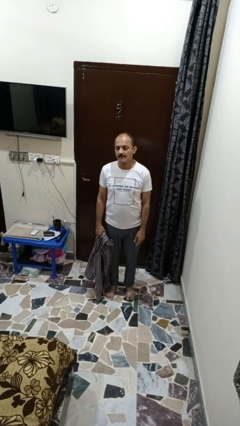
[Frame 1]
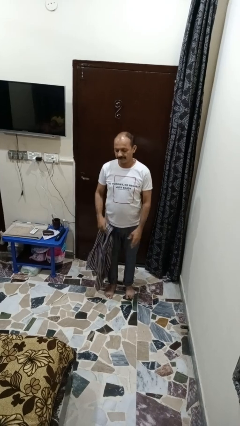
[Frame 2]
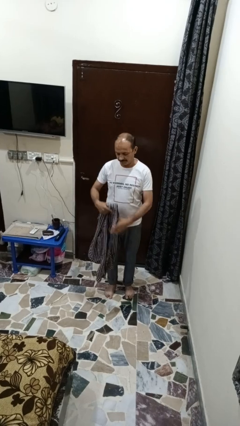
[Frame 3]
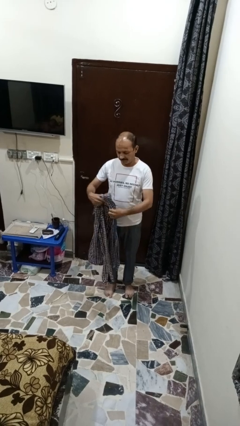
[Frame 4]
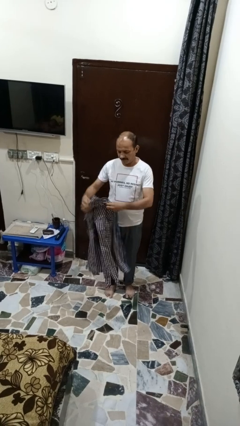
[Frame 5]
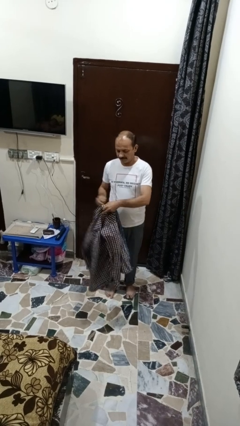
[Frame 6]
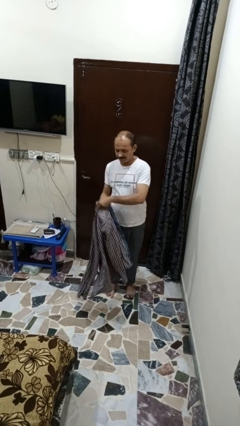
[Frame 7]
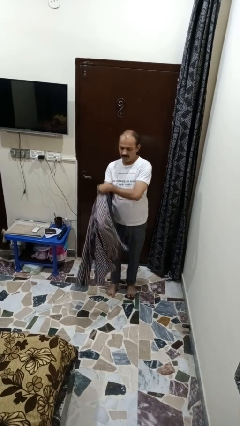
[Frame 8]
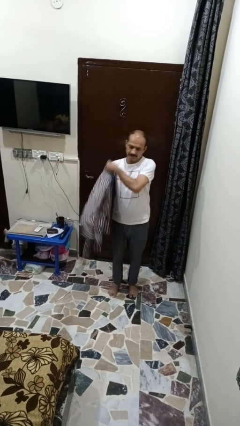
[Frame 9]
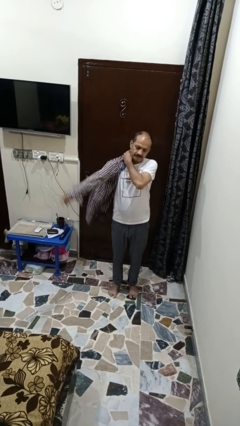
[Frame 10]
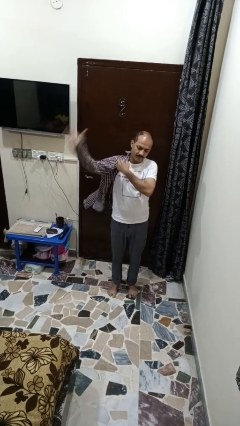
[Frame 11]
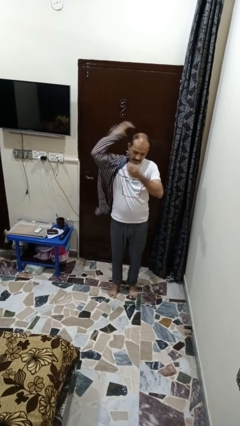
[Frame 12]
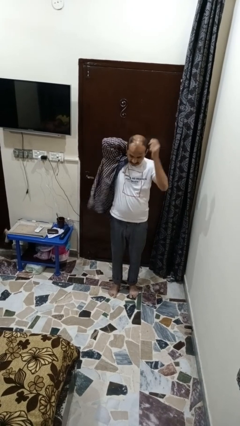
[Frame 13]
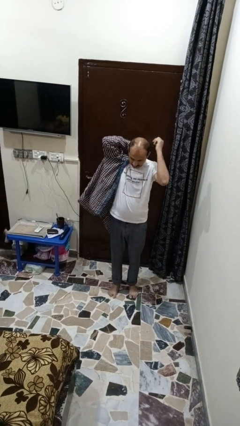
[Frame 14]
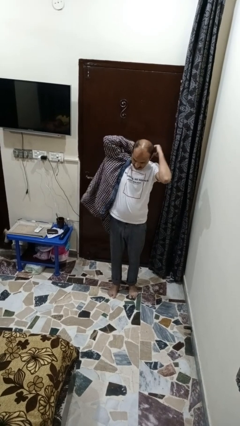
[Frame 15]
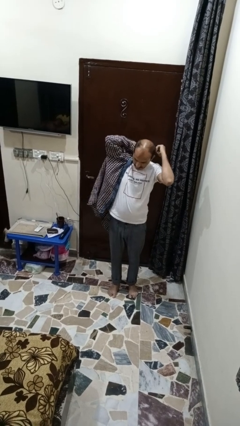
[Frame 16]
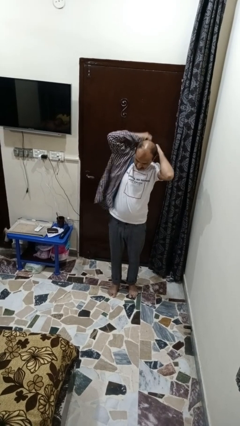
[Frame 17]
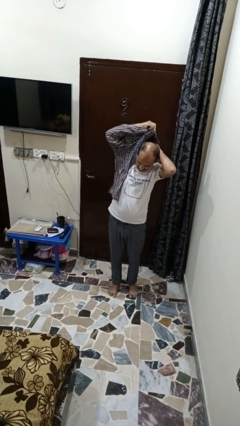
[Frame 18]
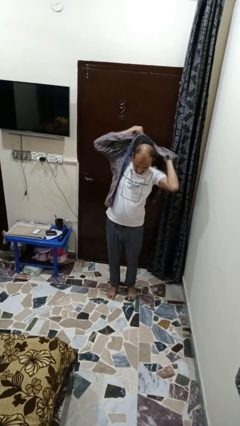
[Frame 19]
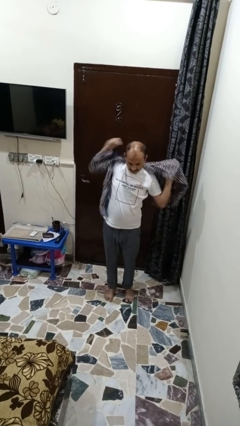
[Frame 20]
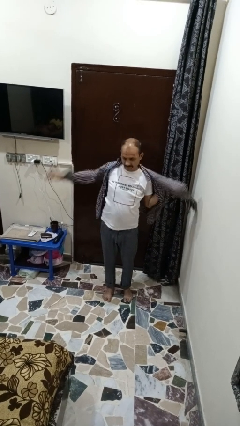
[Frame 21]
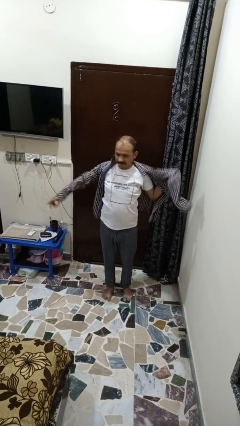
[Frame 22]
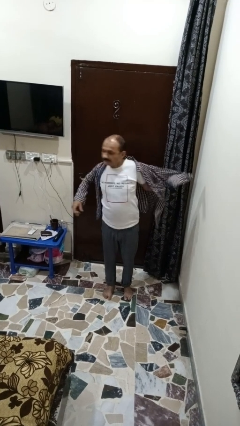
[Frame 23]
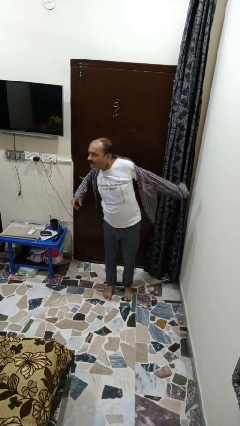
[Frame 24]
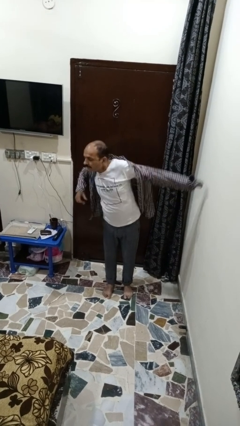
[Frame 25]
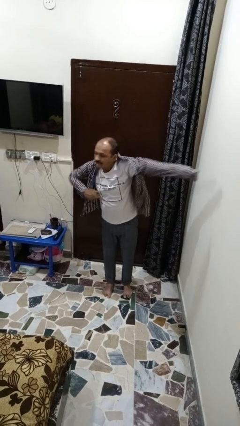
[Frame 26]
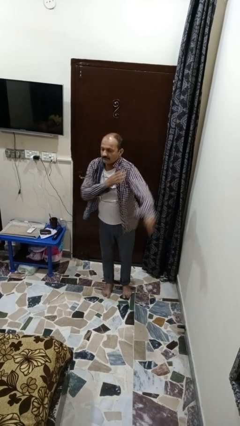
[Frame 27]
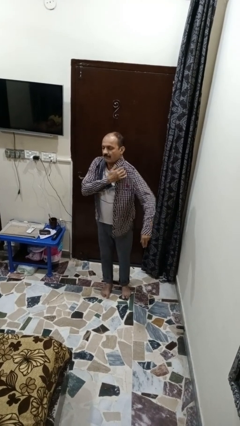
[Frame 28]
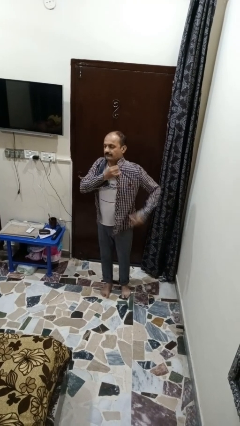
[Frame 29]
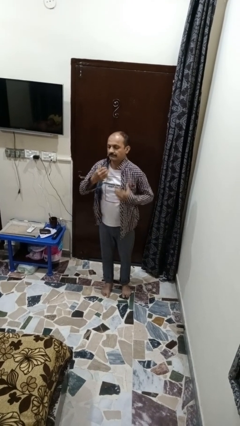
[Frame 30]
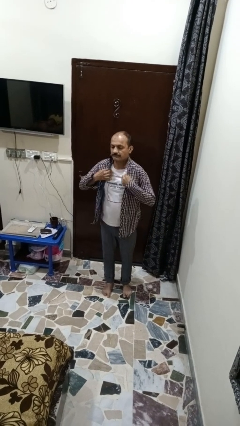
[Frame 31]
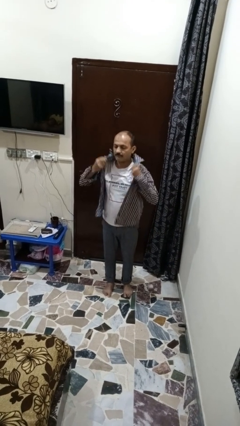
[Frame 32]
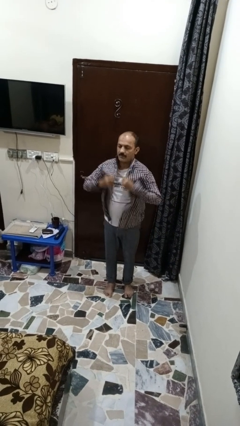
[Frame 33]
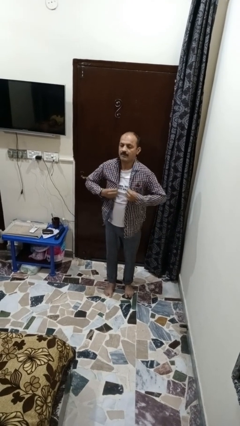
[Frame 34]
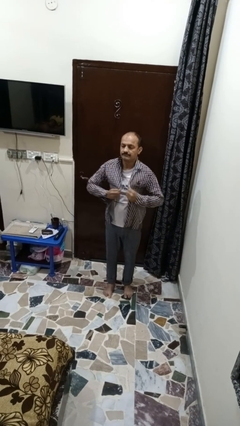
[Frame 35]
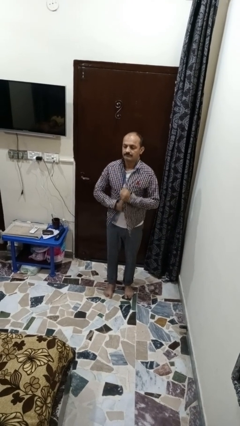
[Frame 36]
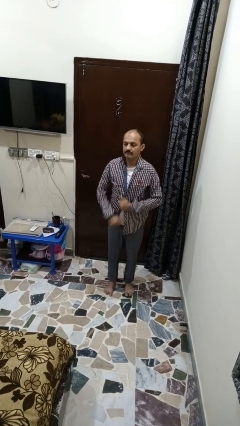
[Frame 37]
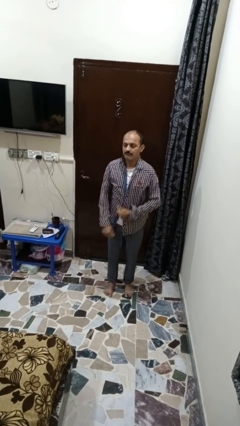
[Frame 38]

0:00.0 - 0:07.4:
person puts on shirt

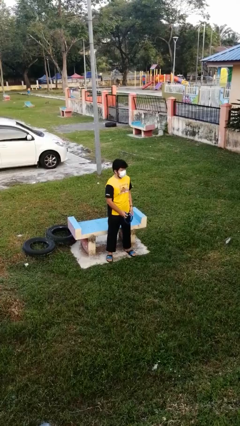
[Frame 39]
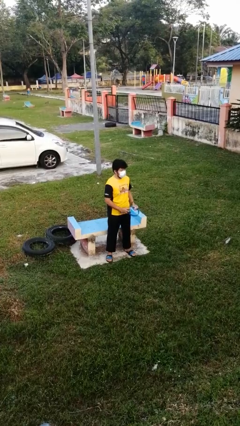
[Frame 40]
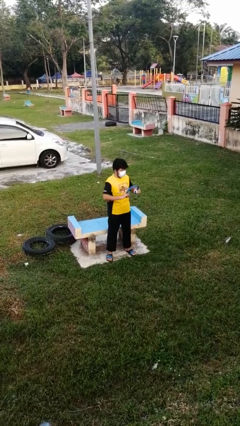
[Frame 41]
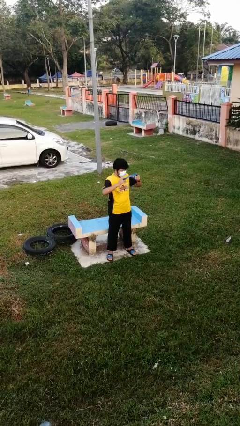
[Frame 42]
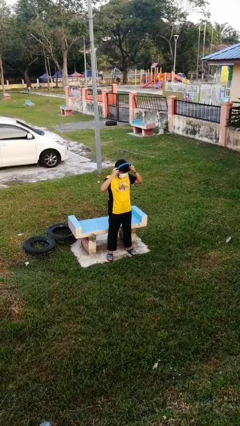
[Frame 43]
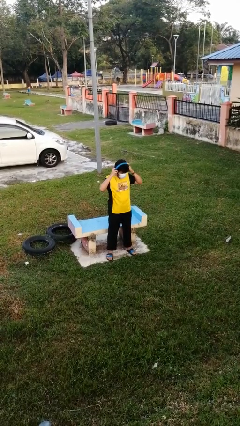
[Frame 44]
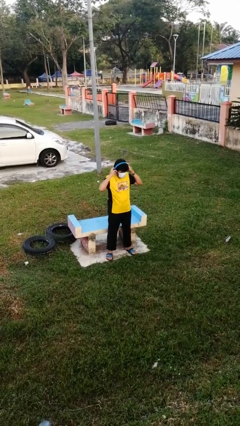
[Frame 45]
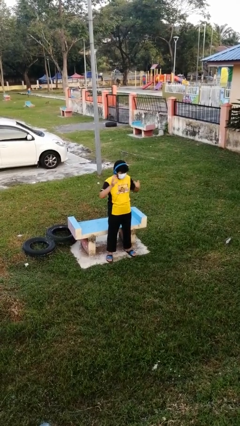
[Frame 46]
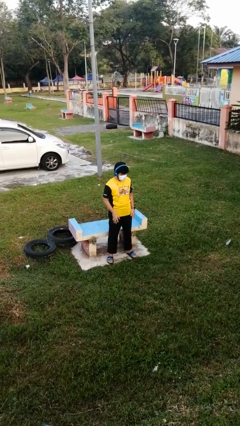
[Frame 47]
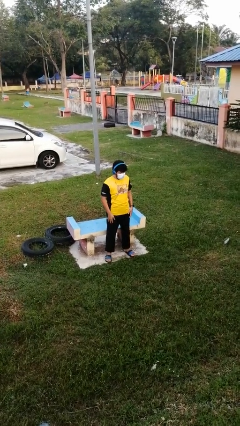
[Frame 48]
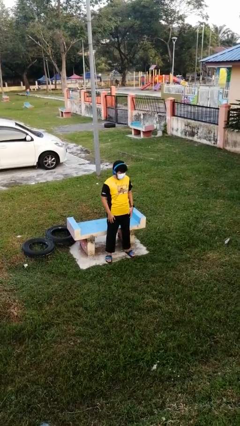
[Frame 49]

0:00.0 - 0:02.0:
person puts on headphones

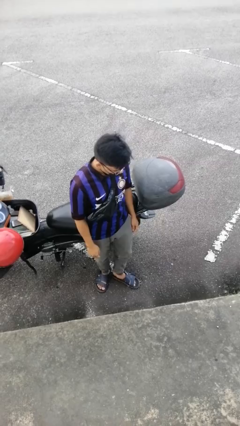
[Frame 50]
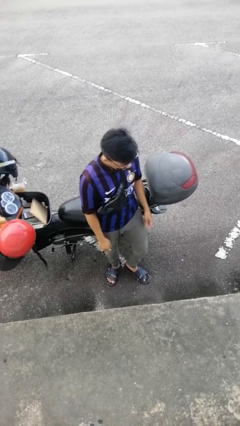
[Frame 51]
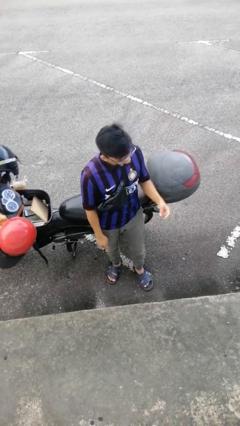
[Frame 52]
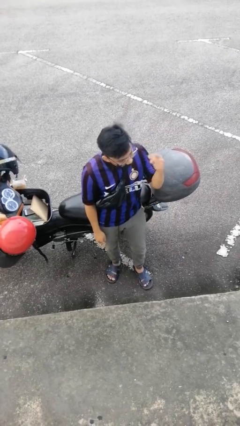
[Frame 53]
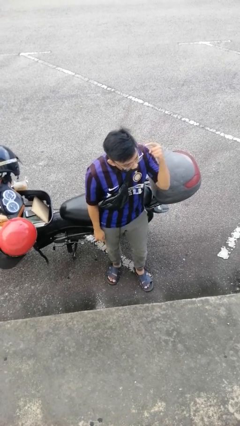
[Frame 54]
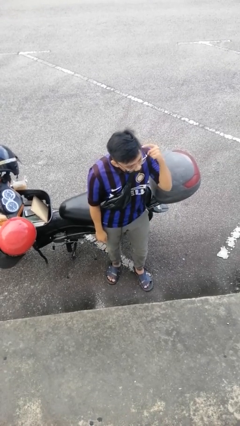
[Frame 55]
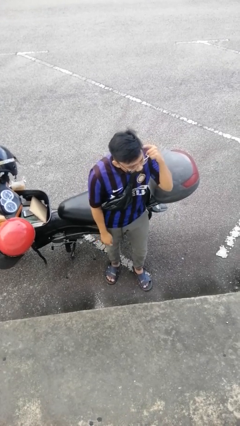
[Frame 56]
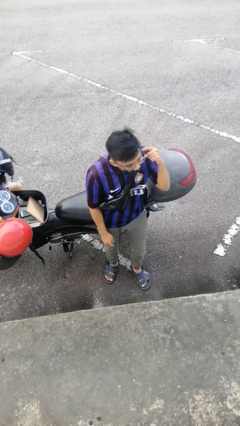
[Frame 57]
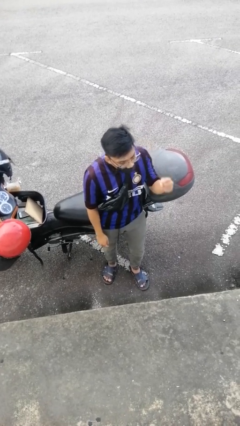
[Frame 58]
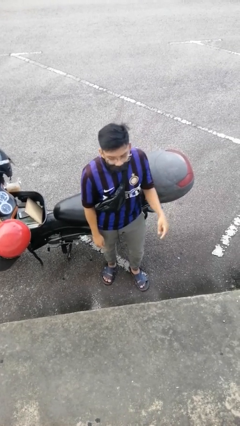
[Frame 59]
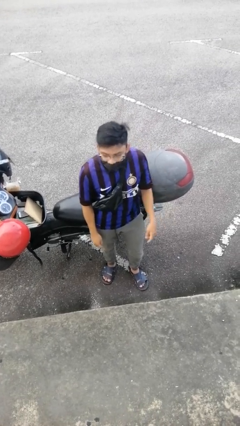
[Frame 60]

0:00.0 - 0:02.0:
person gestures listen closely

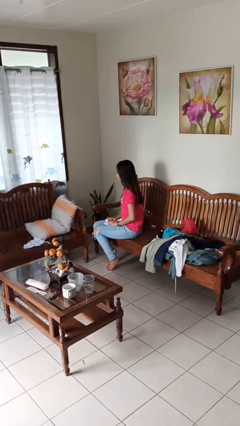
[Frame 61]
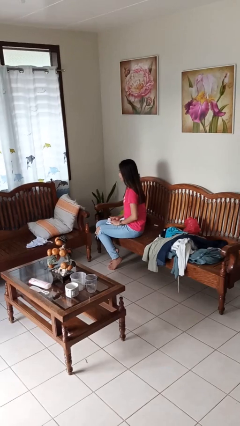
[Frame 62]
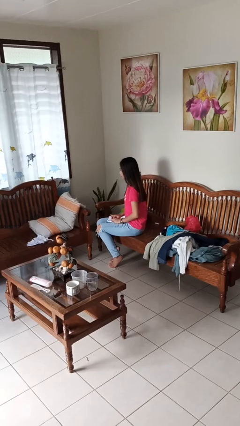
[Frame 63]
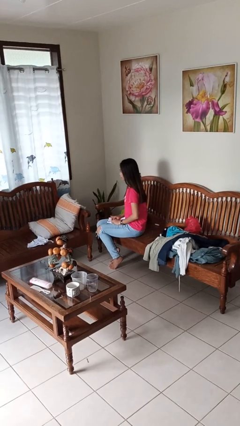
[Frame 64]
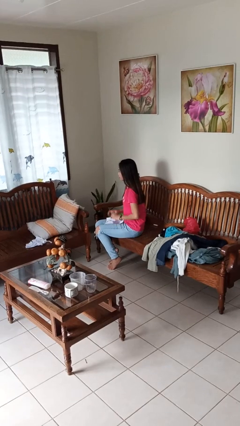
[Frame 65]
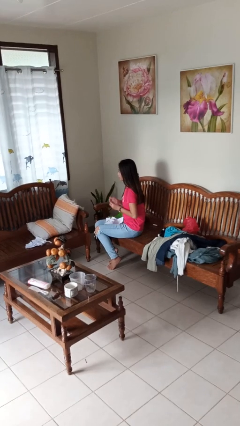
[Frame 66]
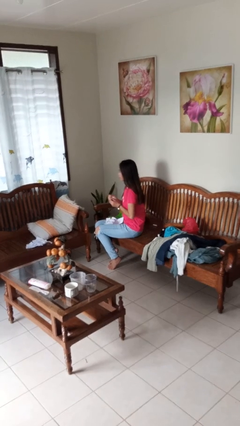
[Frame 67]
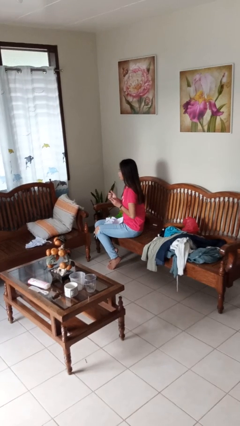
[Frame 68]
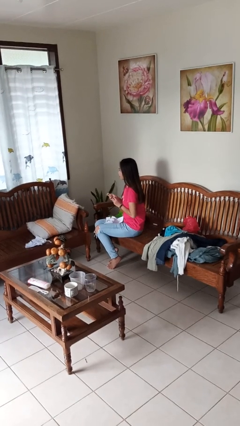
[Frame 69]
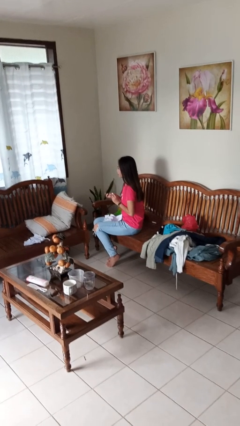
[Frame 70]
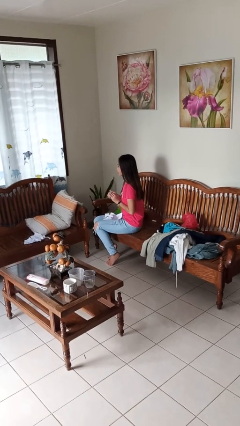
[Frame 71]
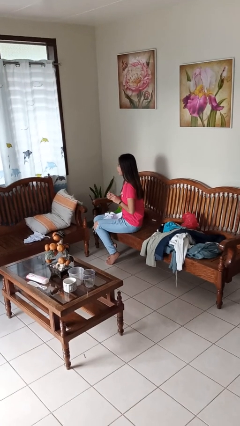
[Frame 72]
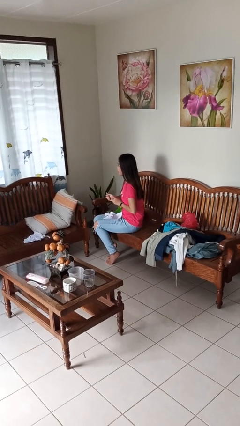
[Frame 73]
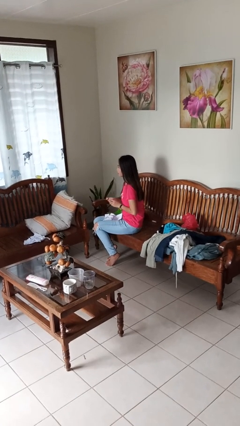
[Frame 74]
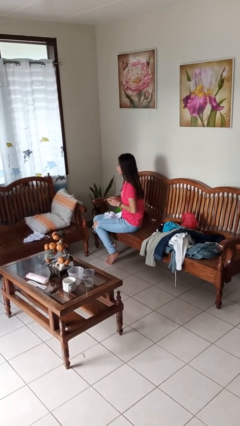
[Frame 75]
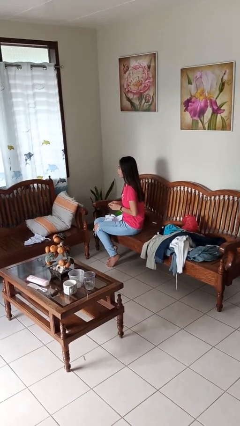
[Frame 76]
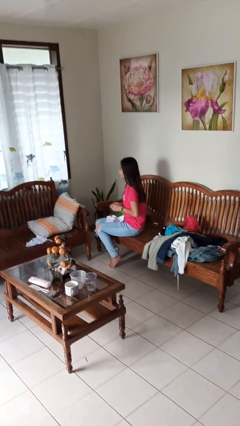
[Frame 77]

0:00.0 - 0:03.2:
person crumples paper

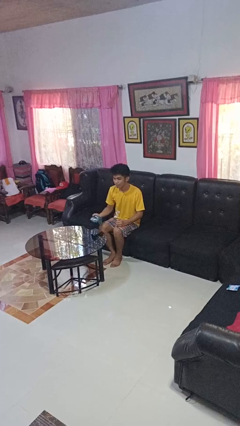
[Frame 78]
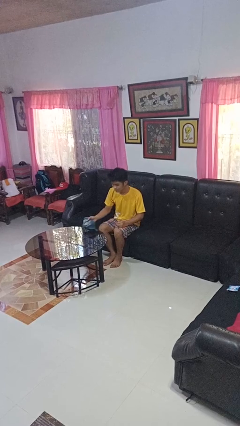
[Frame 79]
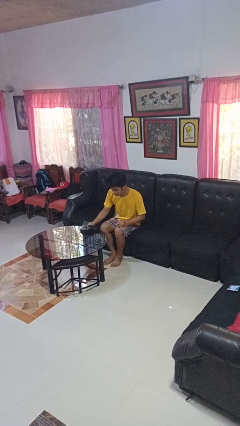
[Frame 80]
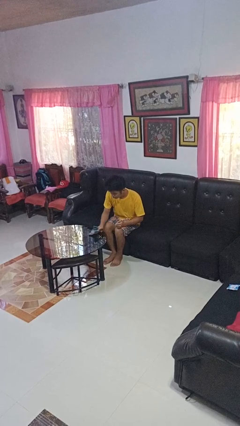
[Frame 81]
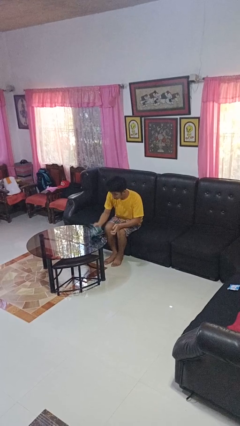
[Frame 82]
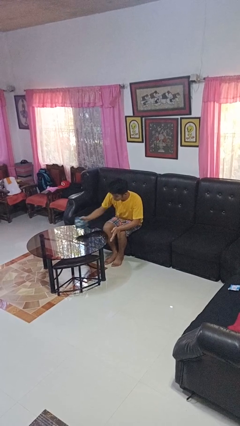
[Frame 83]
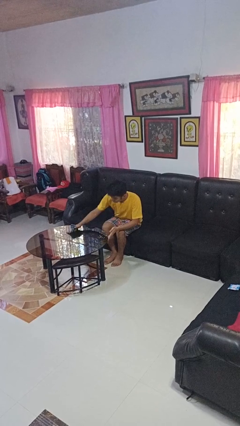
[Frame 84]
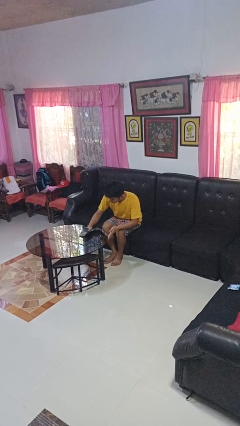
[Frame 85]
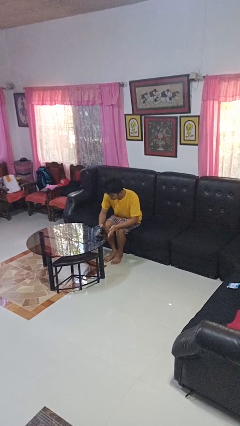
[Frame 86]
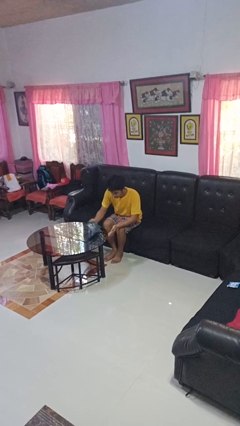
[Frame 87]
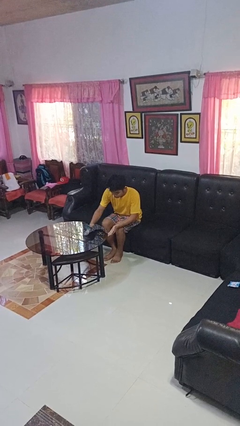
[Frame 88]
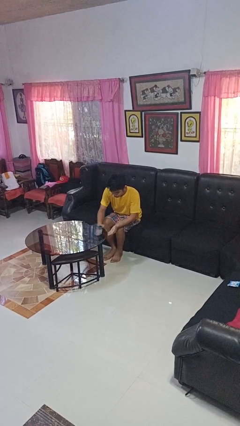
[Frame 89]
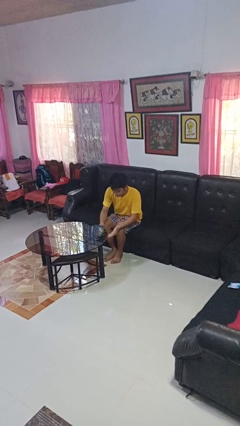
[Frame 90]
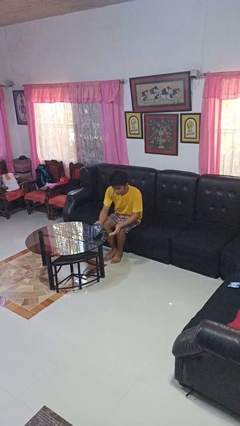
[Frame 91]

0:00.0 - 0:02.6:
person cleans table with rag

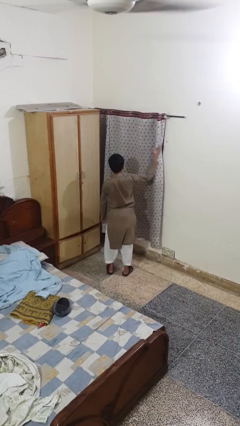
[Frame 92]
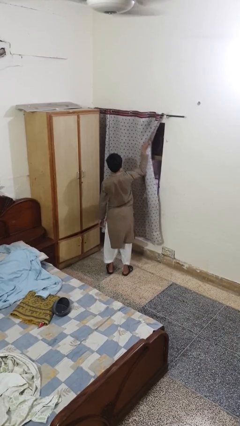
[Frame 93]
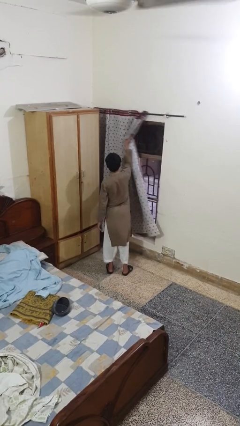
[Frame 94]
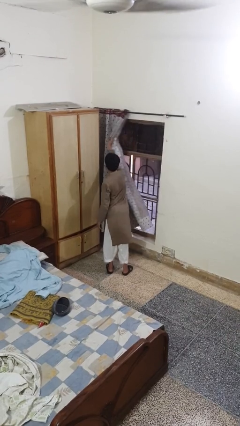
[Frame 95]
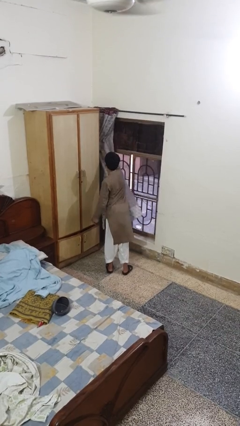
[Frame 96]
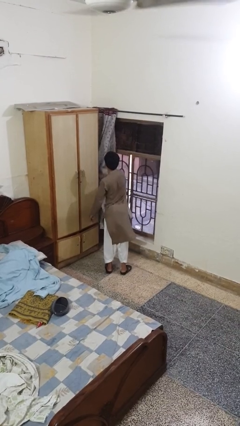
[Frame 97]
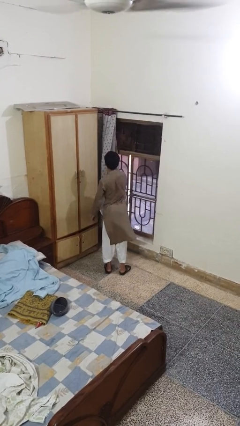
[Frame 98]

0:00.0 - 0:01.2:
person opens curtains
